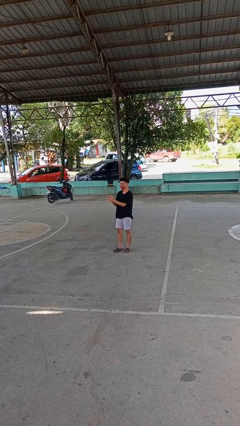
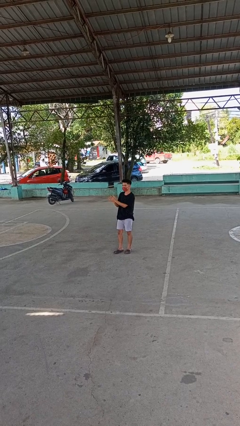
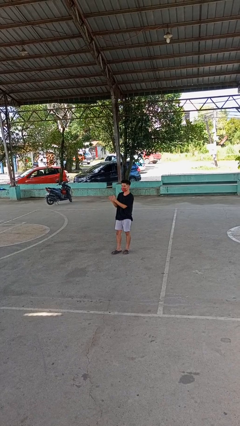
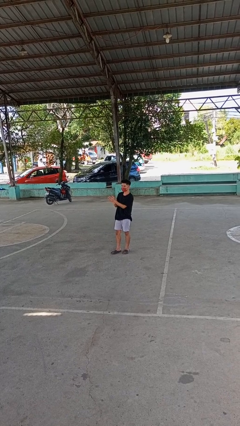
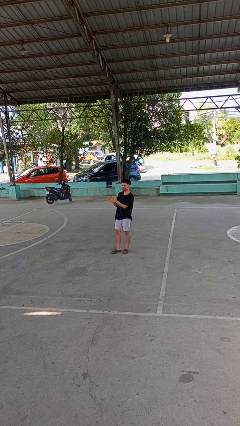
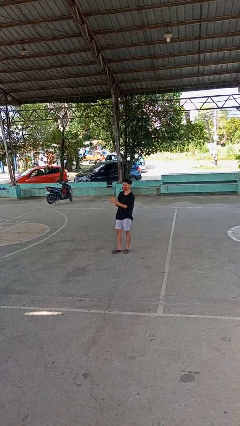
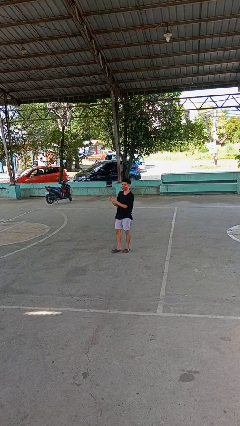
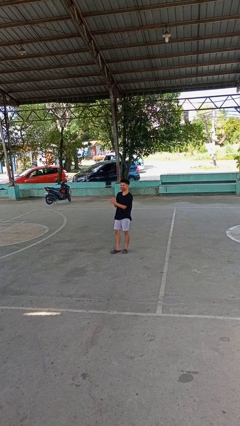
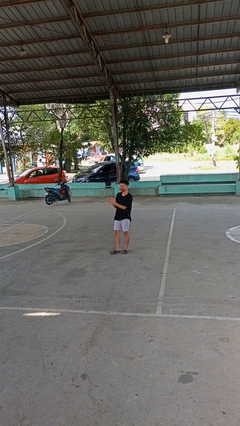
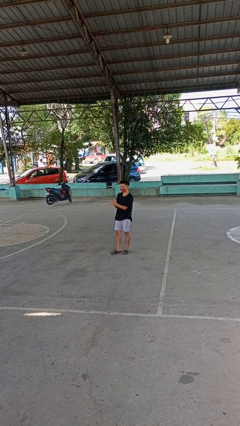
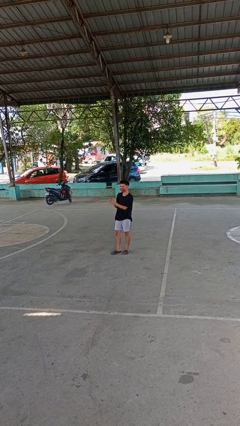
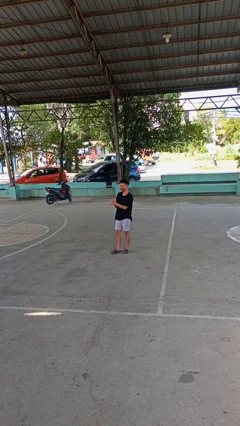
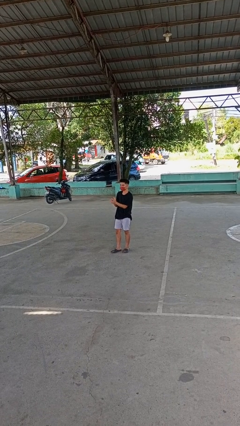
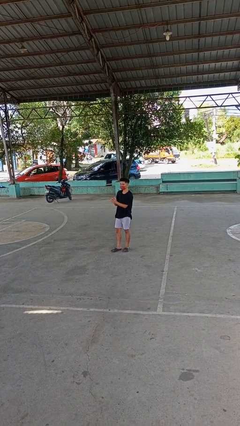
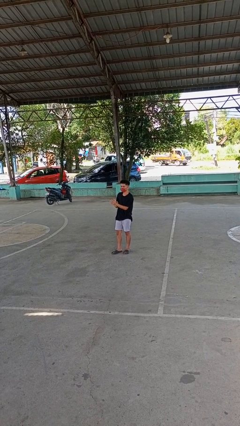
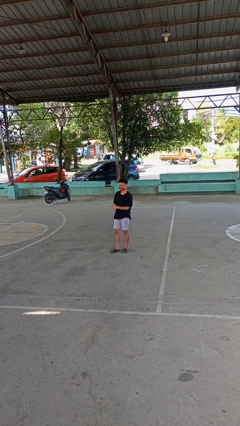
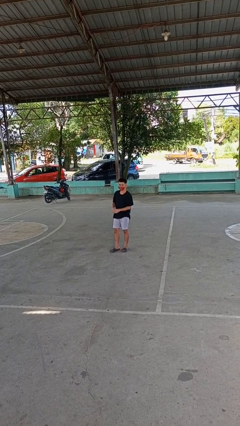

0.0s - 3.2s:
person claps hands

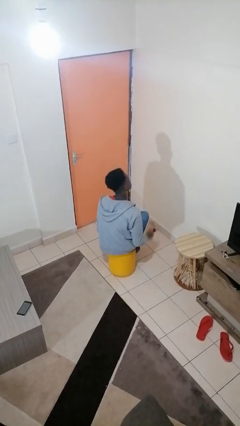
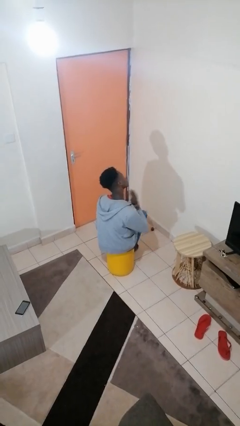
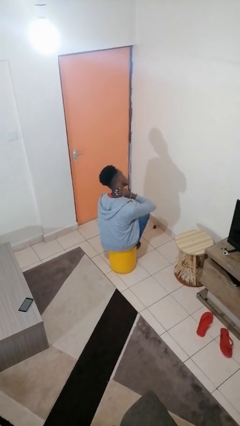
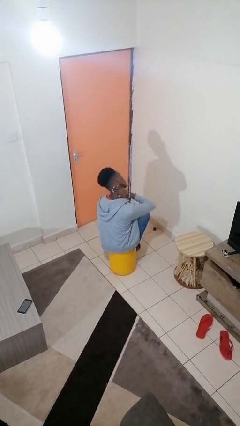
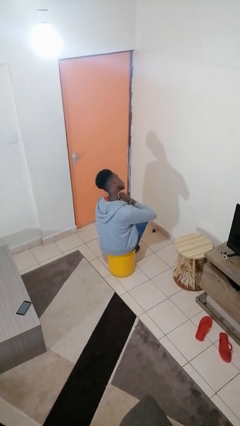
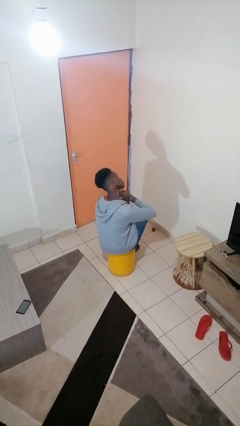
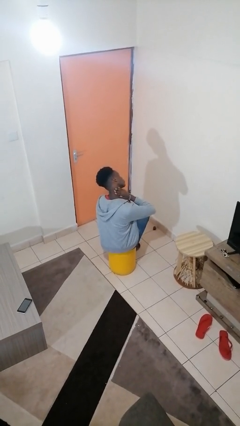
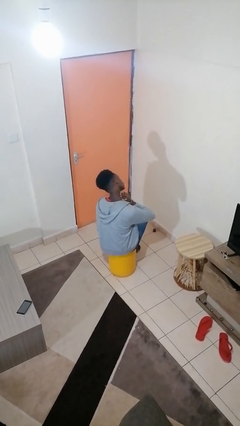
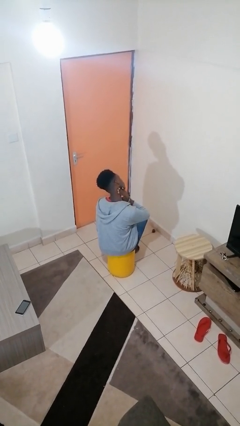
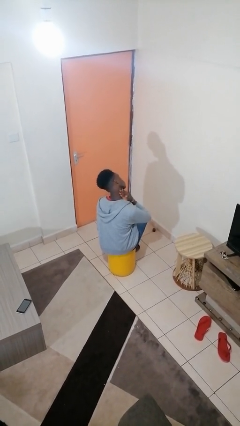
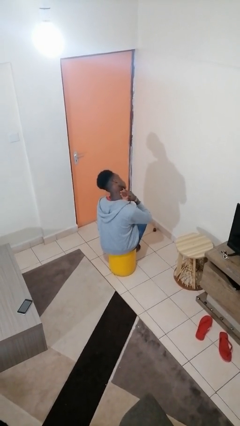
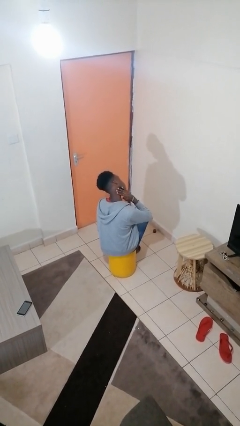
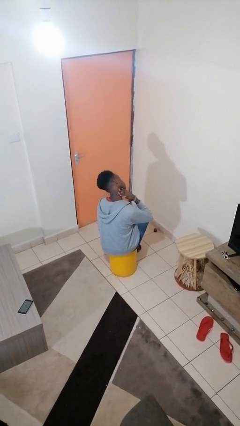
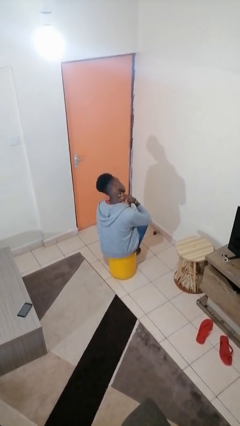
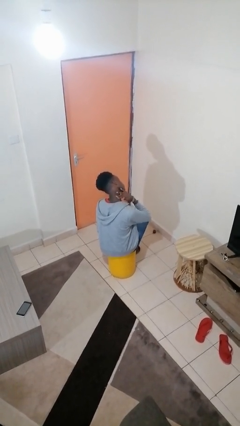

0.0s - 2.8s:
person rubs neck

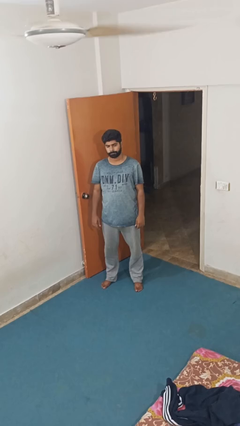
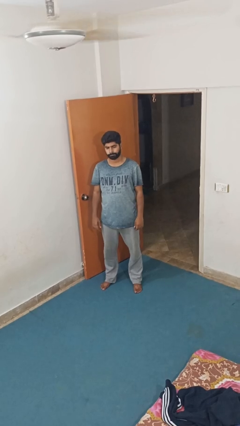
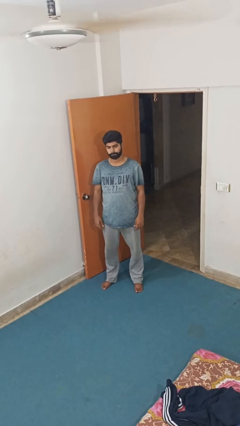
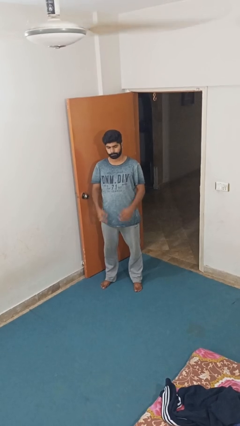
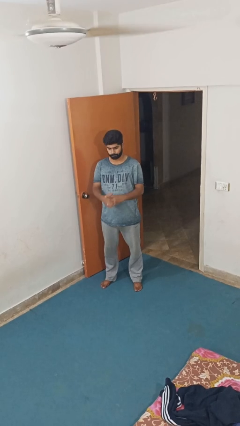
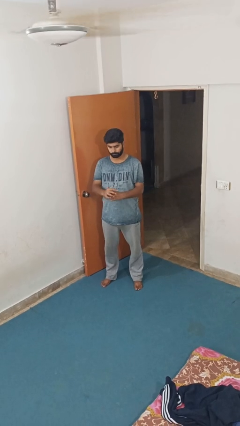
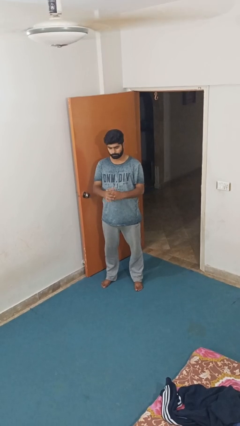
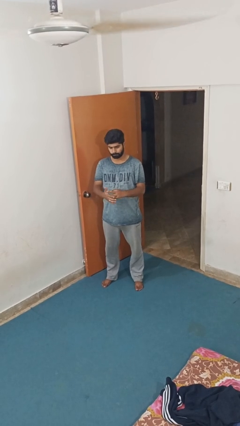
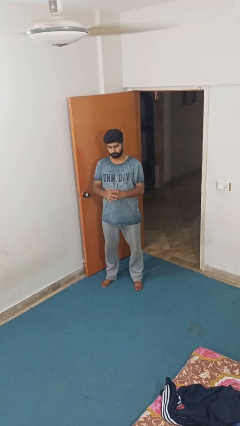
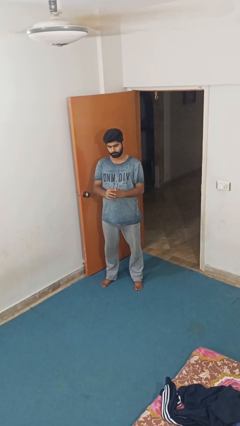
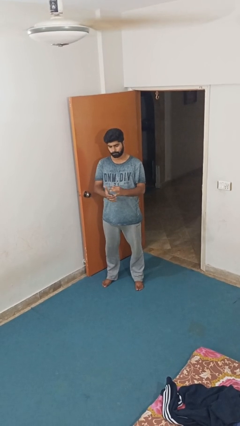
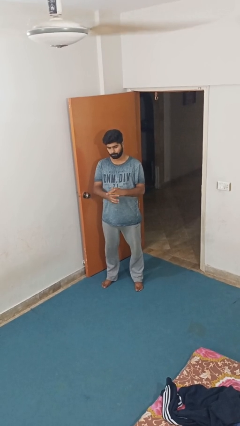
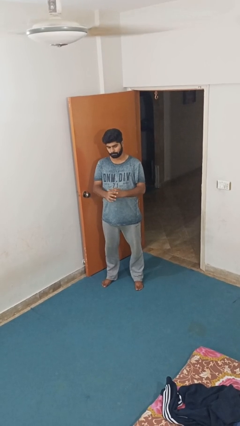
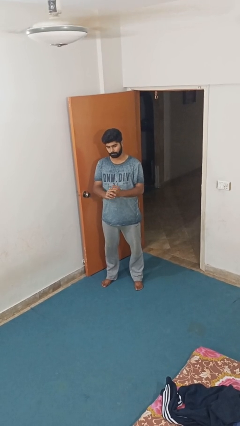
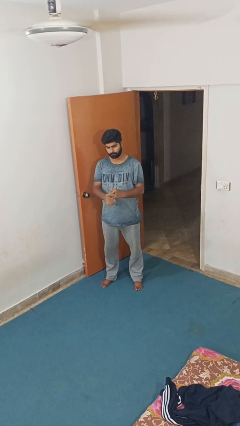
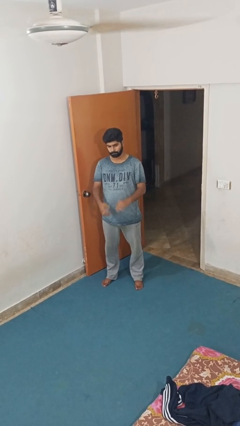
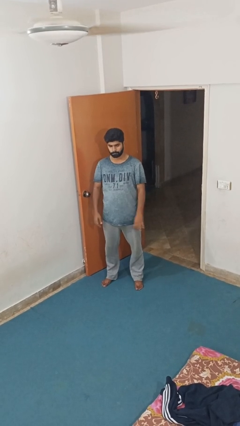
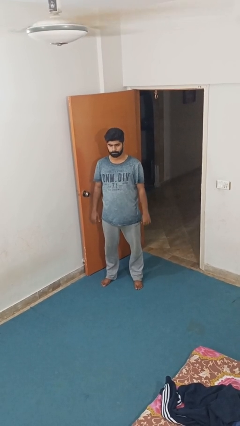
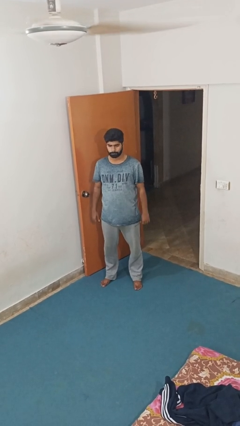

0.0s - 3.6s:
person snaps fingers

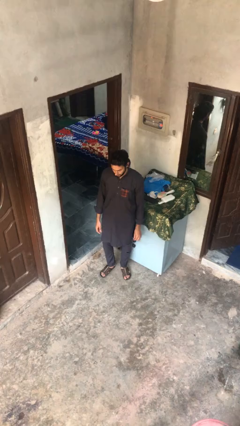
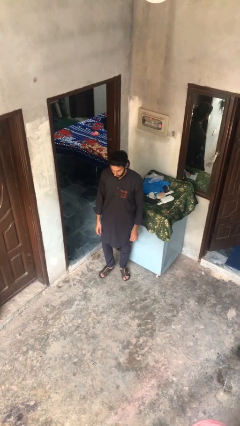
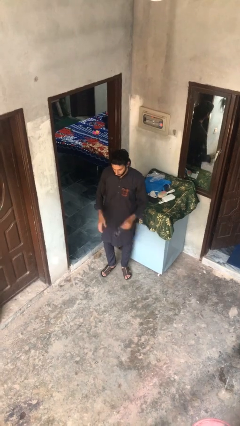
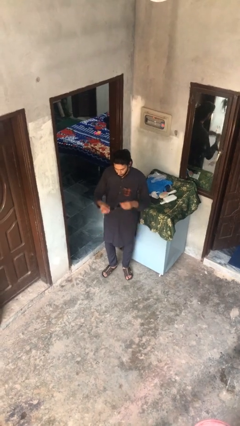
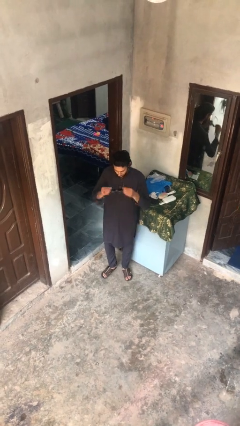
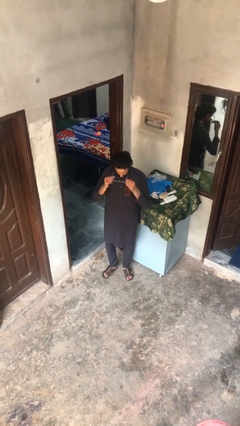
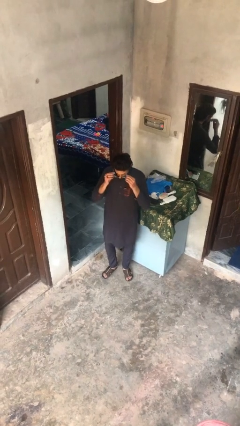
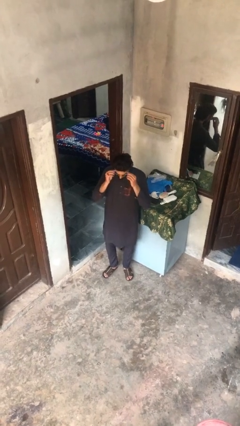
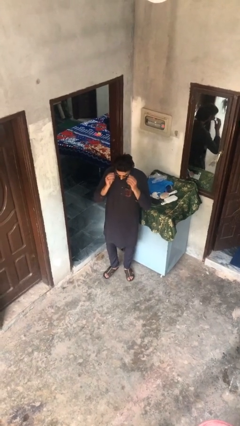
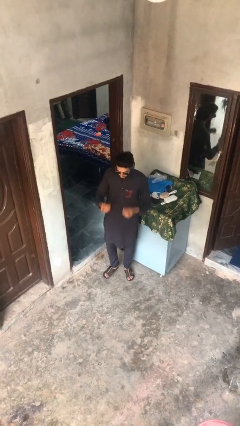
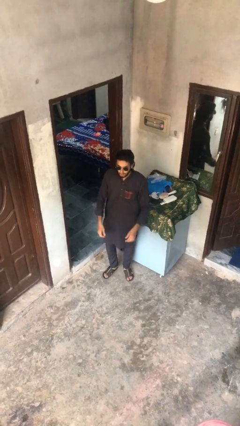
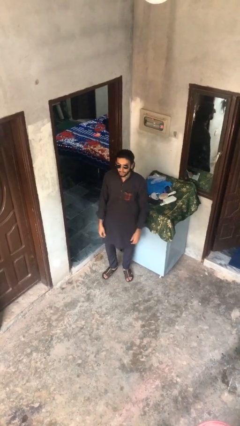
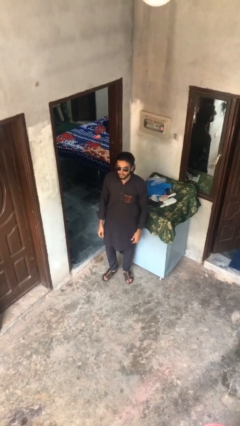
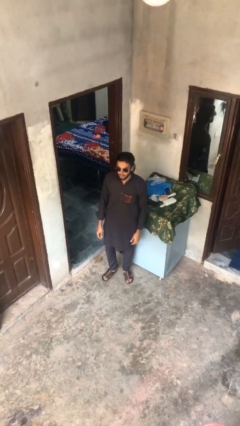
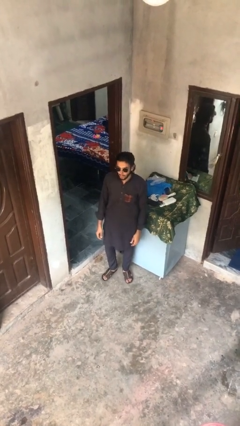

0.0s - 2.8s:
person puts on sunglasses

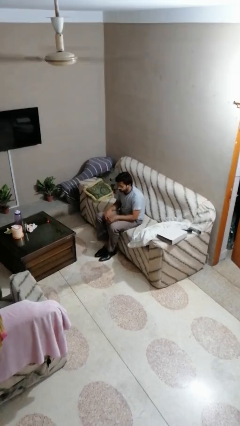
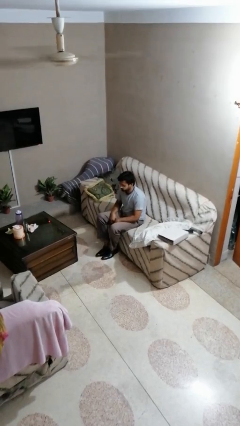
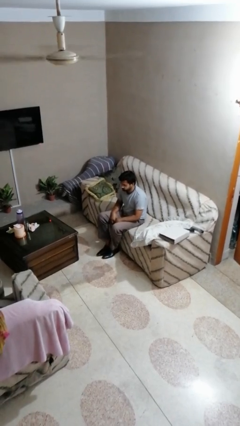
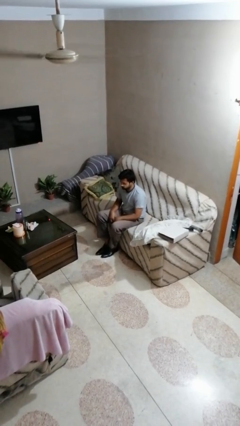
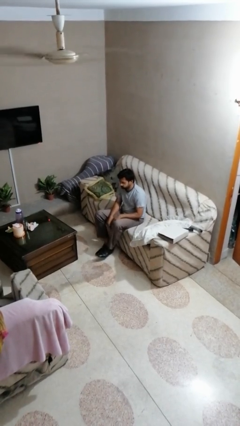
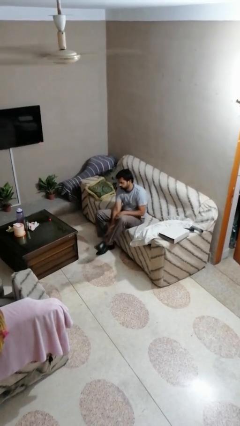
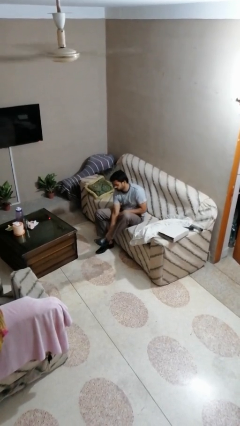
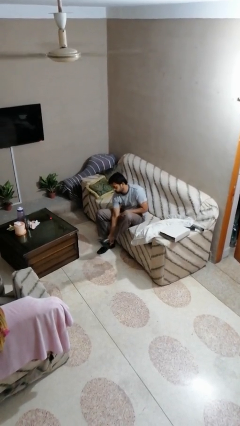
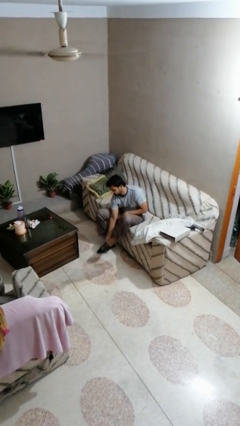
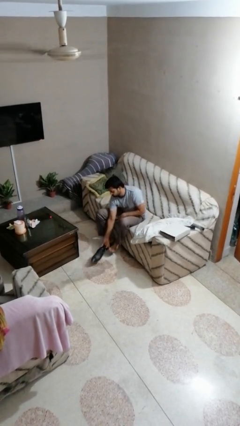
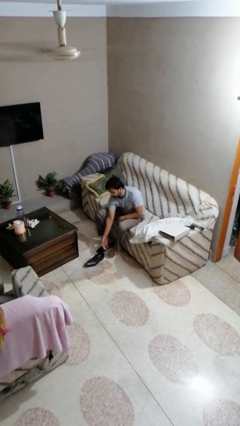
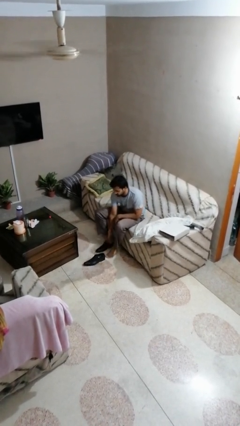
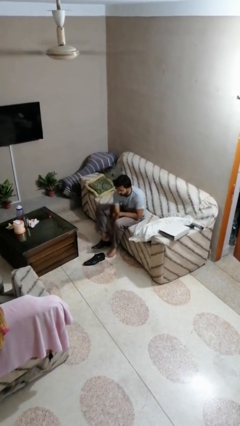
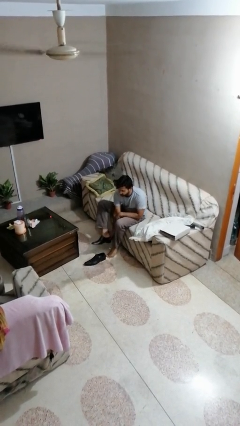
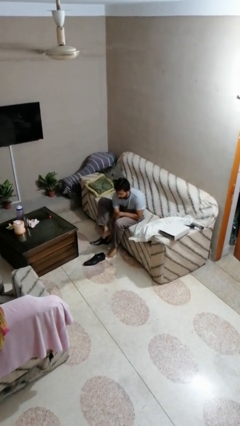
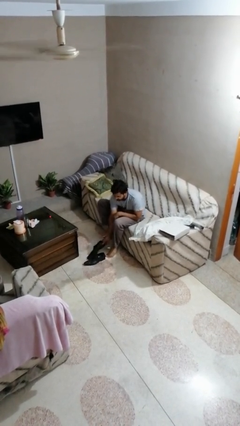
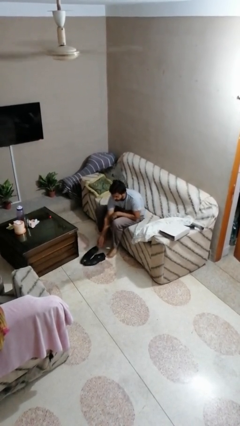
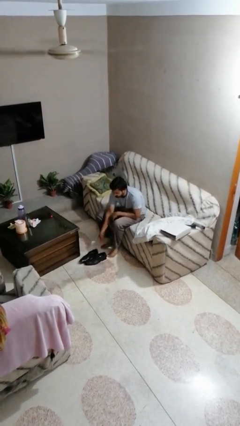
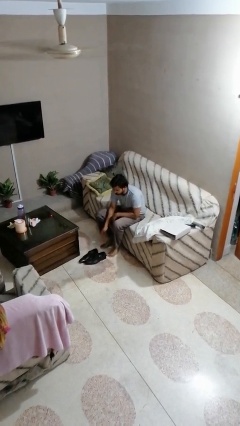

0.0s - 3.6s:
person takes off shoes

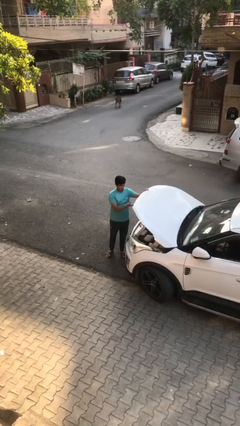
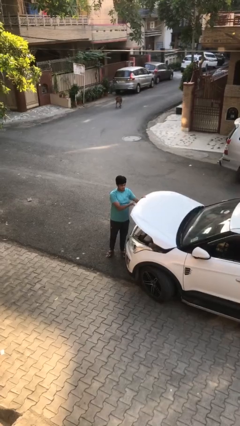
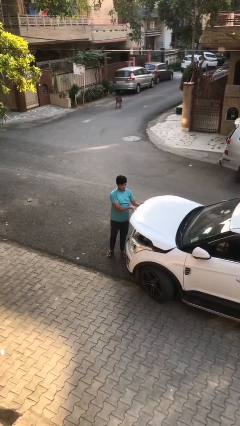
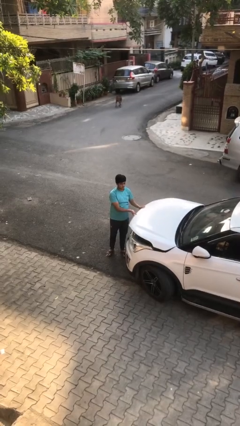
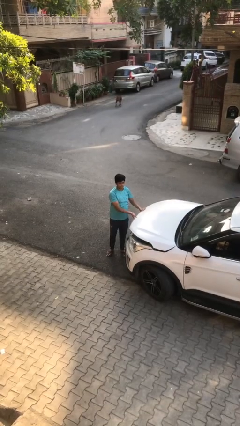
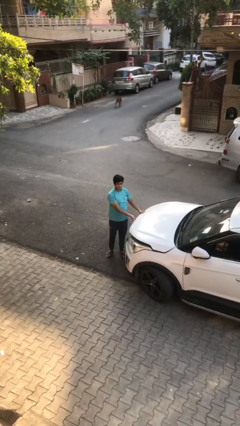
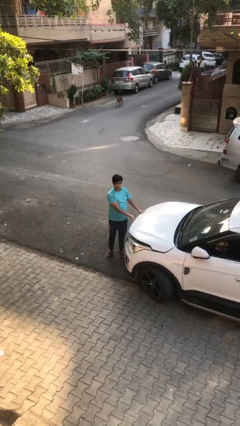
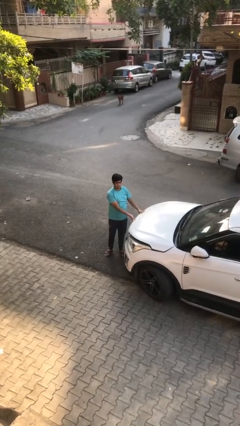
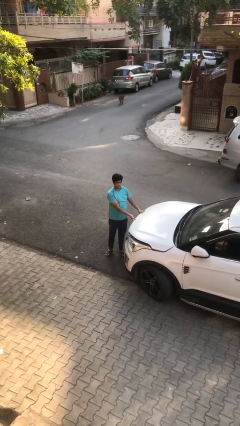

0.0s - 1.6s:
person closes car hood
